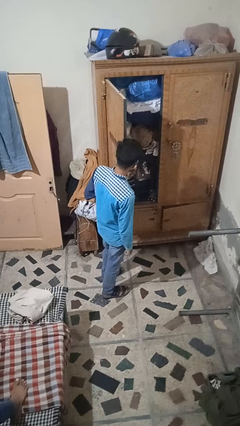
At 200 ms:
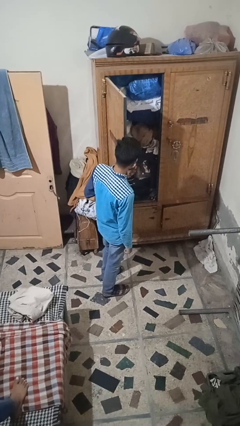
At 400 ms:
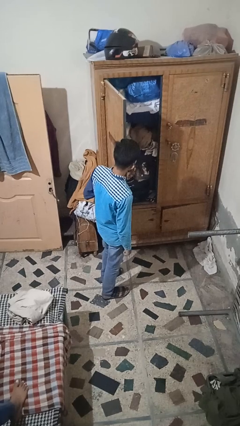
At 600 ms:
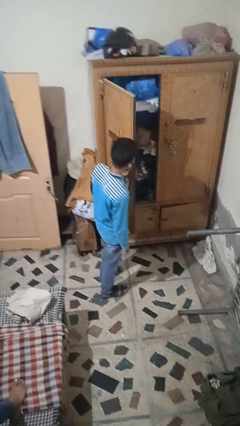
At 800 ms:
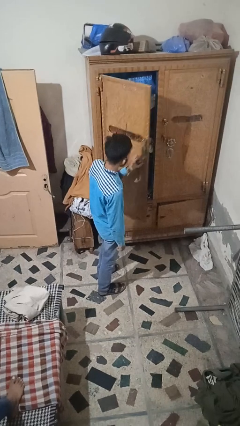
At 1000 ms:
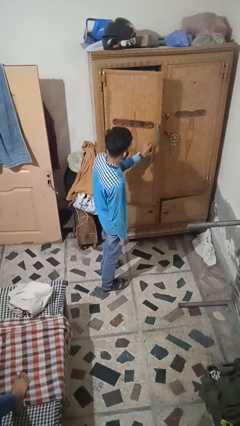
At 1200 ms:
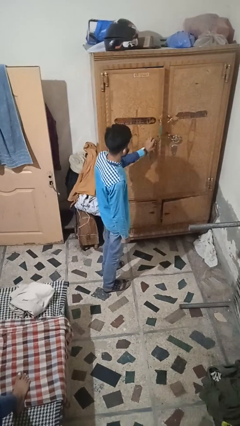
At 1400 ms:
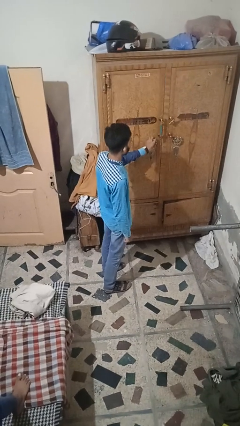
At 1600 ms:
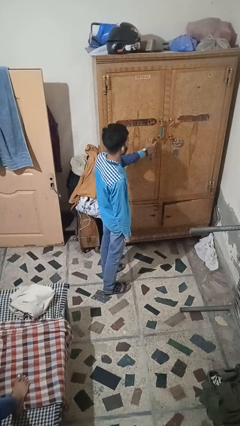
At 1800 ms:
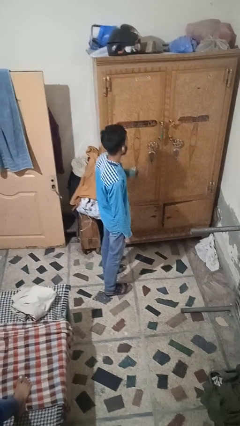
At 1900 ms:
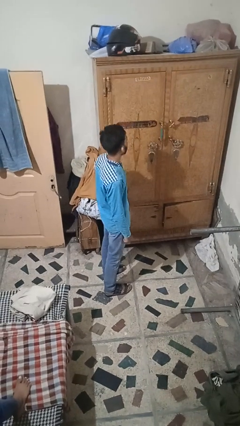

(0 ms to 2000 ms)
person closes closet door

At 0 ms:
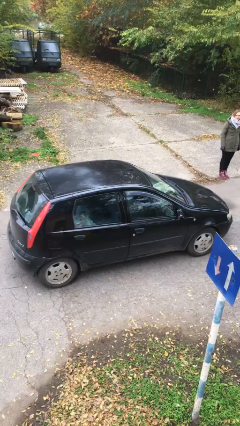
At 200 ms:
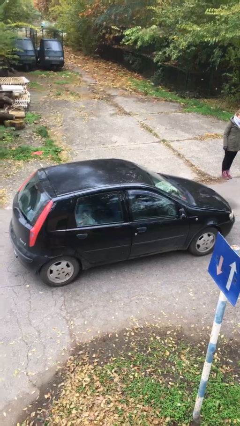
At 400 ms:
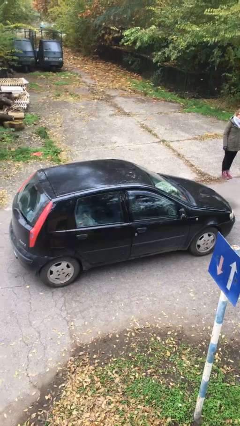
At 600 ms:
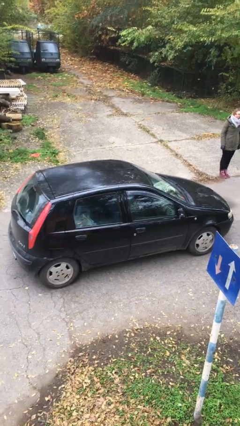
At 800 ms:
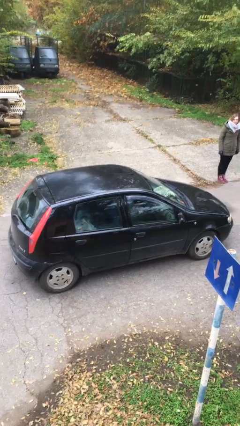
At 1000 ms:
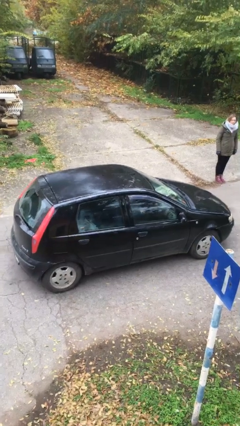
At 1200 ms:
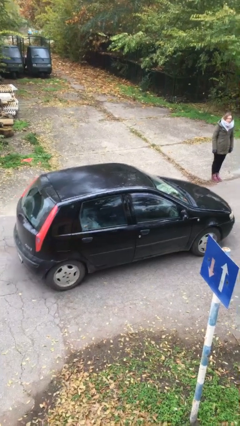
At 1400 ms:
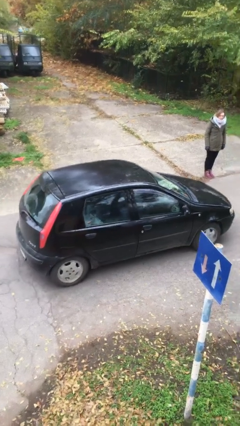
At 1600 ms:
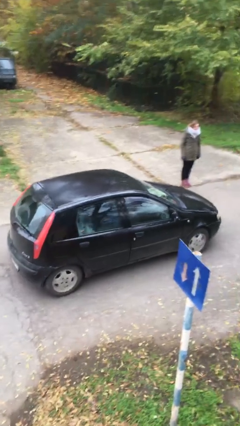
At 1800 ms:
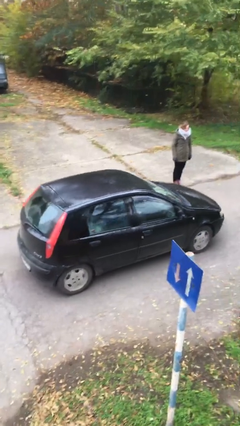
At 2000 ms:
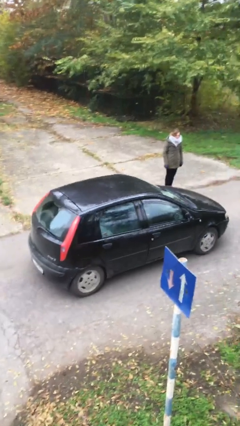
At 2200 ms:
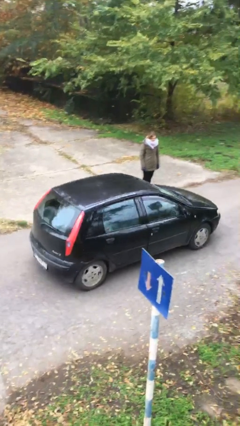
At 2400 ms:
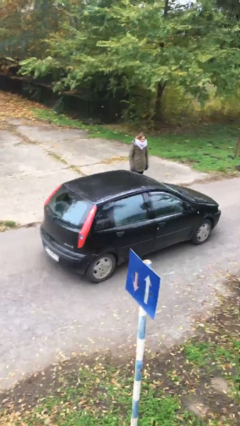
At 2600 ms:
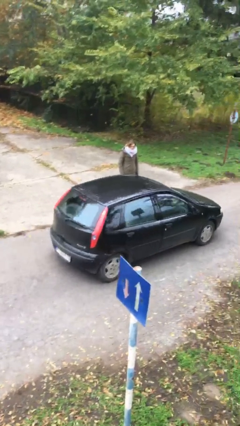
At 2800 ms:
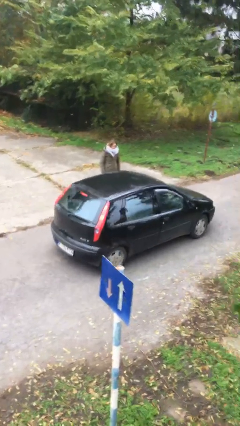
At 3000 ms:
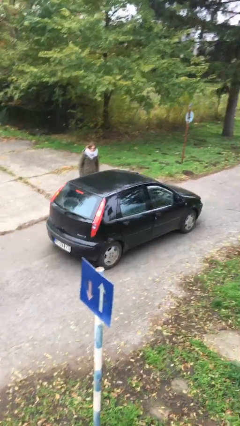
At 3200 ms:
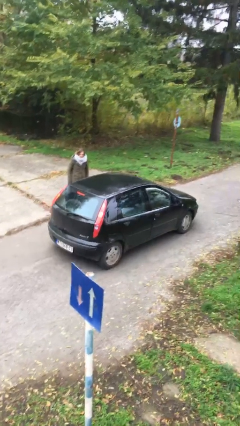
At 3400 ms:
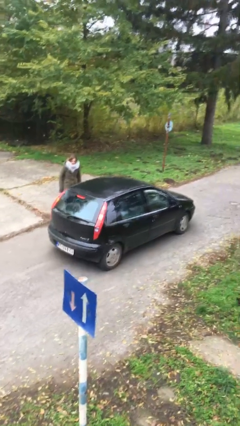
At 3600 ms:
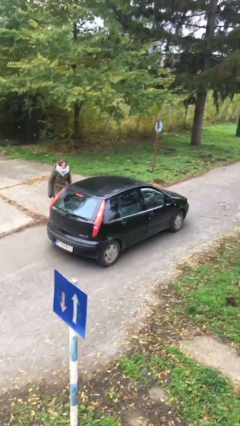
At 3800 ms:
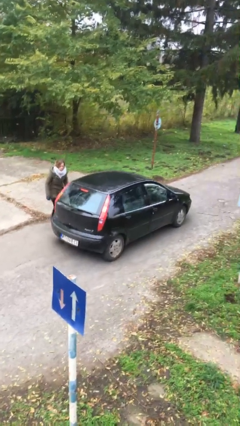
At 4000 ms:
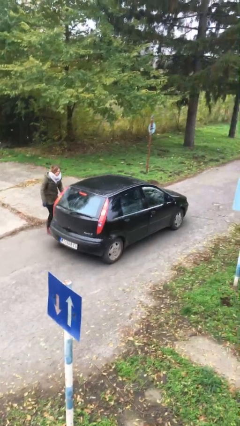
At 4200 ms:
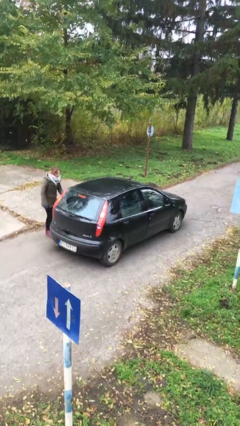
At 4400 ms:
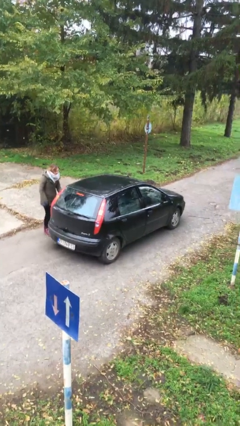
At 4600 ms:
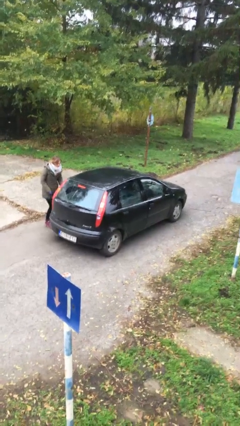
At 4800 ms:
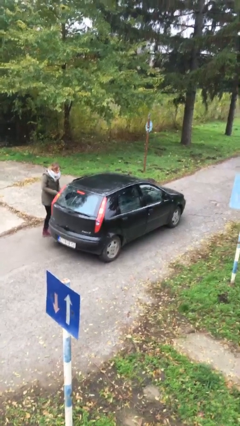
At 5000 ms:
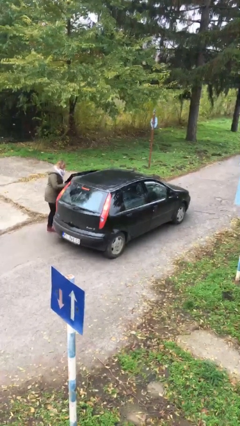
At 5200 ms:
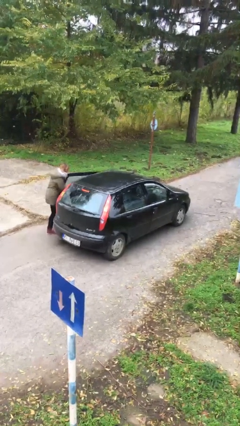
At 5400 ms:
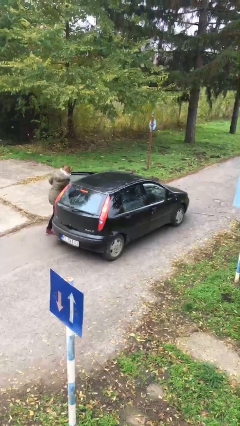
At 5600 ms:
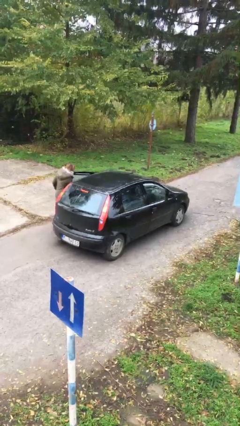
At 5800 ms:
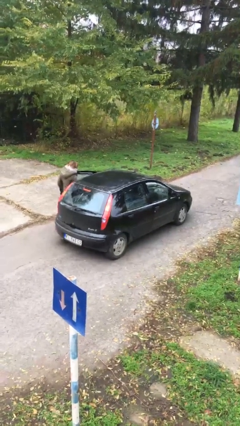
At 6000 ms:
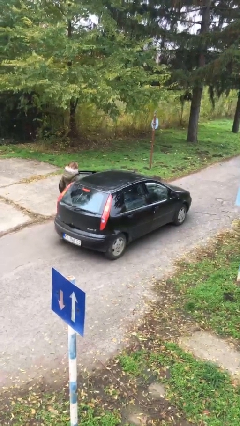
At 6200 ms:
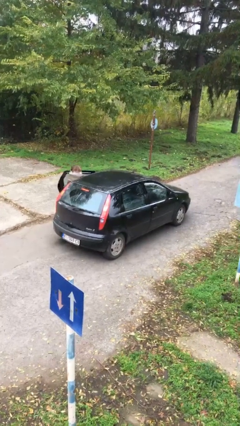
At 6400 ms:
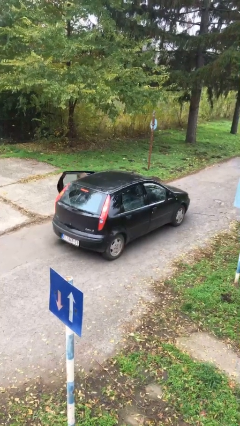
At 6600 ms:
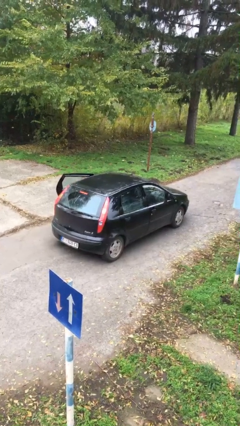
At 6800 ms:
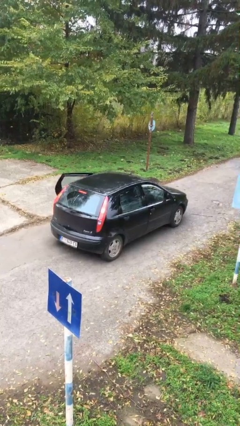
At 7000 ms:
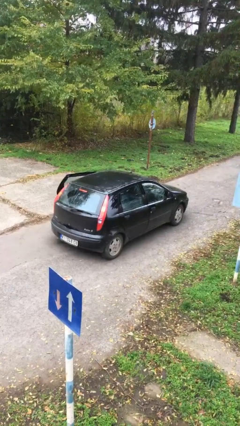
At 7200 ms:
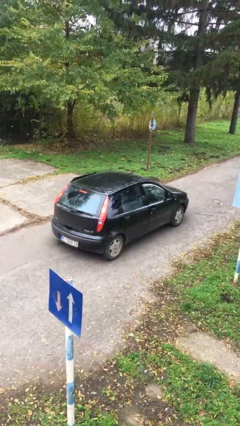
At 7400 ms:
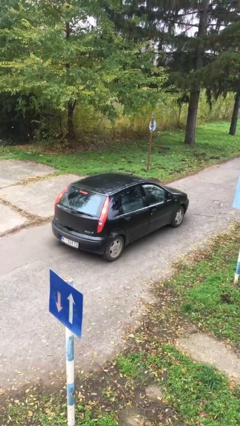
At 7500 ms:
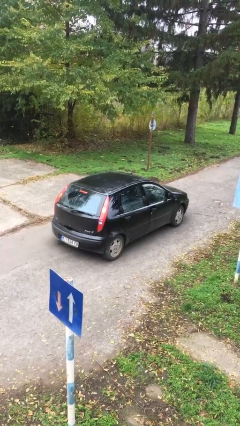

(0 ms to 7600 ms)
car picks up person

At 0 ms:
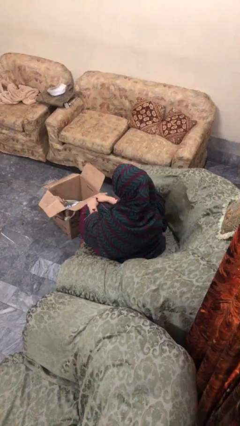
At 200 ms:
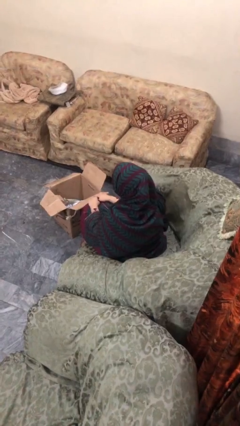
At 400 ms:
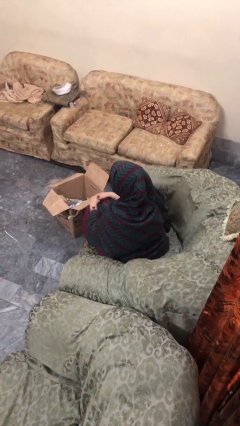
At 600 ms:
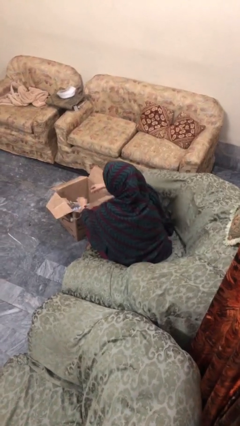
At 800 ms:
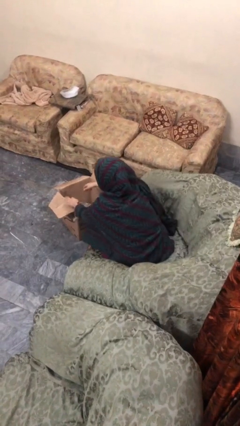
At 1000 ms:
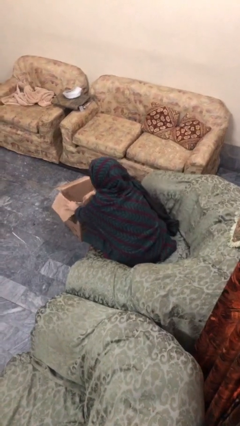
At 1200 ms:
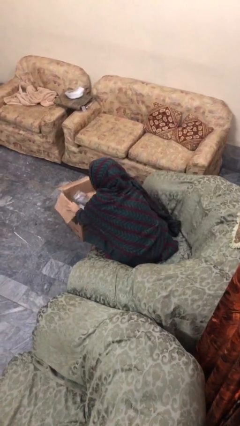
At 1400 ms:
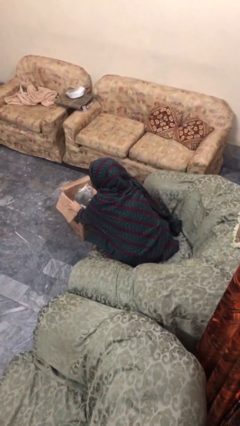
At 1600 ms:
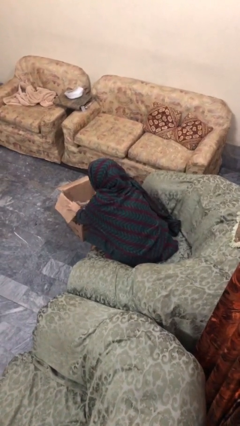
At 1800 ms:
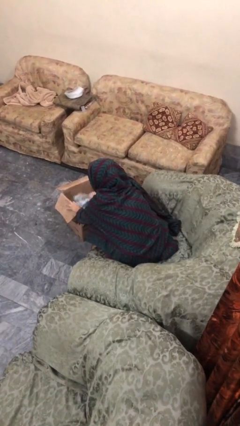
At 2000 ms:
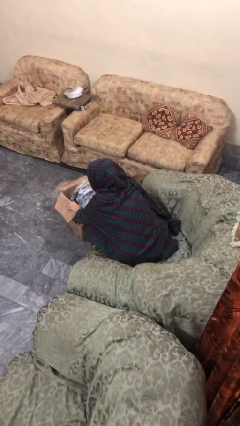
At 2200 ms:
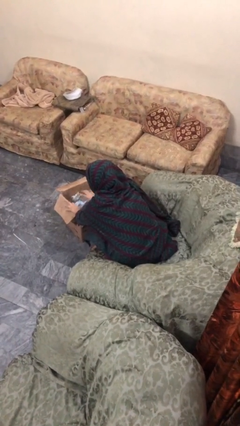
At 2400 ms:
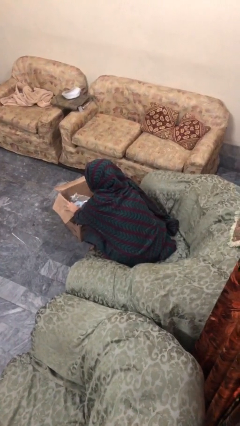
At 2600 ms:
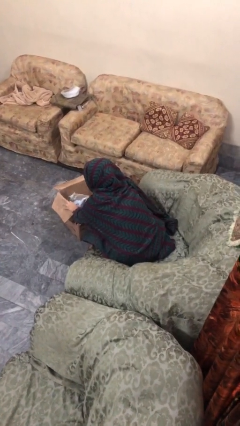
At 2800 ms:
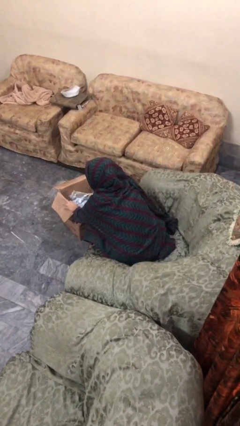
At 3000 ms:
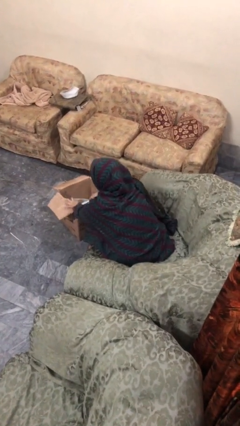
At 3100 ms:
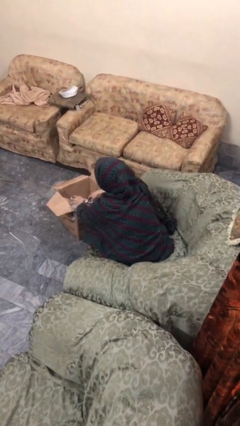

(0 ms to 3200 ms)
person searches in box

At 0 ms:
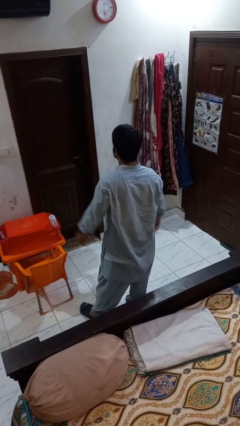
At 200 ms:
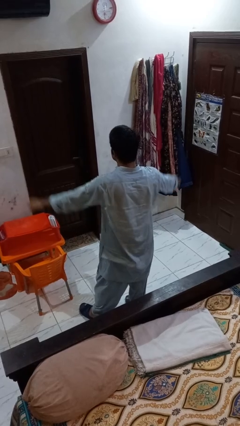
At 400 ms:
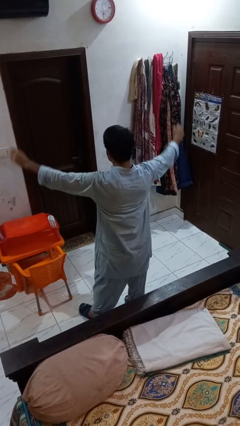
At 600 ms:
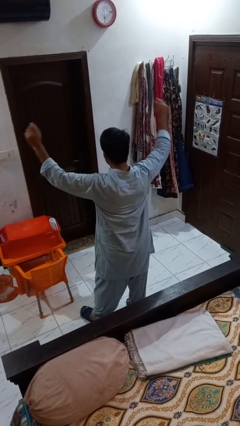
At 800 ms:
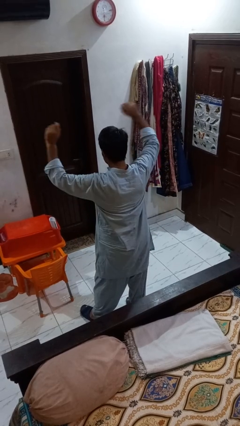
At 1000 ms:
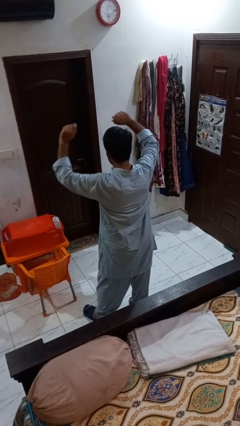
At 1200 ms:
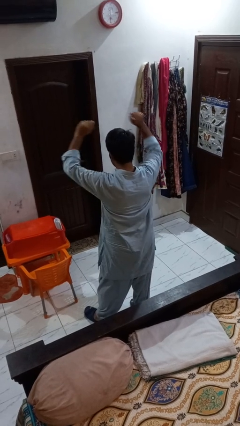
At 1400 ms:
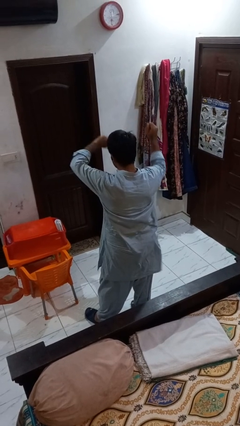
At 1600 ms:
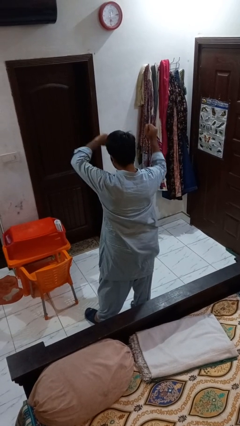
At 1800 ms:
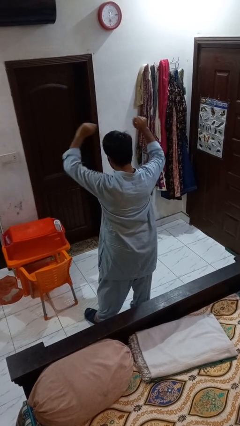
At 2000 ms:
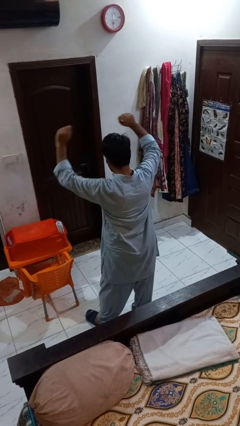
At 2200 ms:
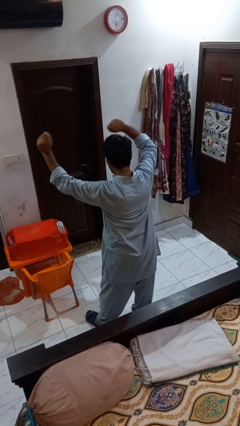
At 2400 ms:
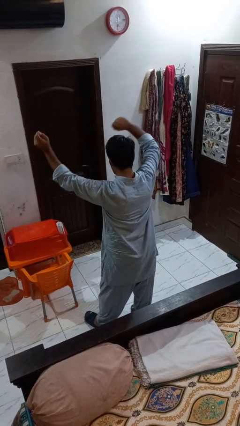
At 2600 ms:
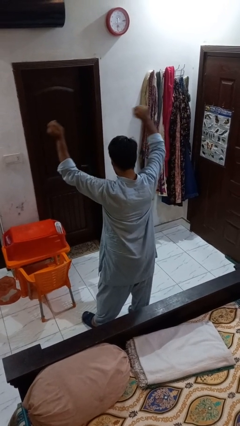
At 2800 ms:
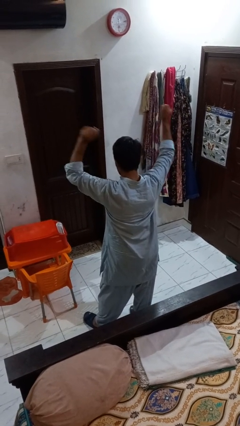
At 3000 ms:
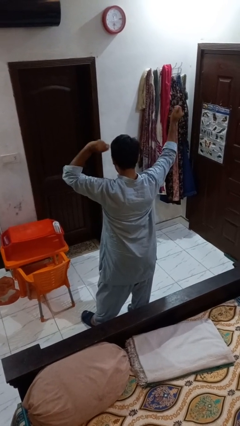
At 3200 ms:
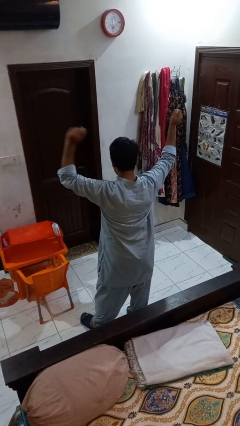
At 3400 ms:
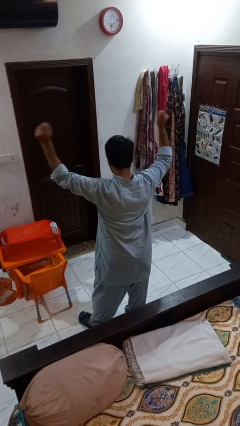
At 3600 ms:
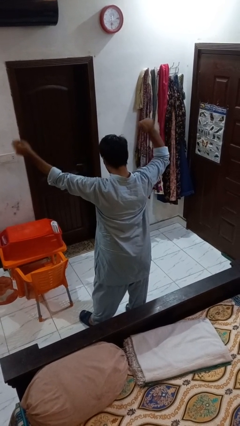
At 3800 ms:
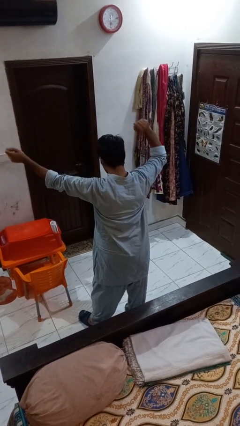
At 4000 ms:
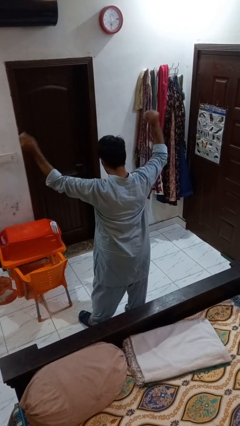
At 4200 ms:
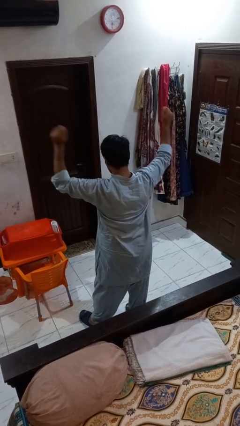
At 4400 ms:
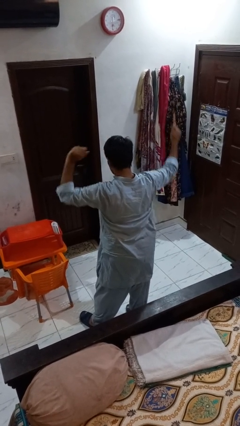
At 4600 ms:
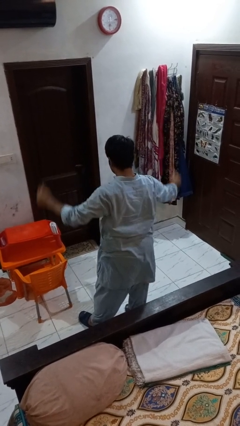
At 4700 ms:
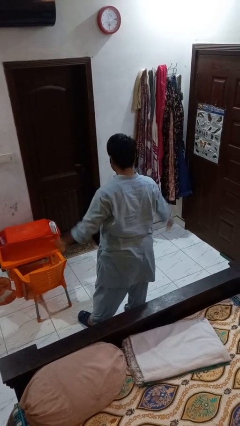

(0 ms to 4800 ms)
person dances in place
